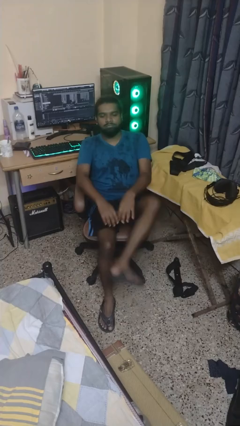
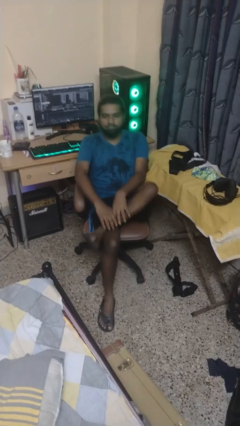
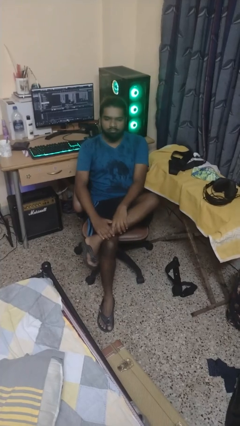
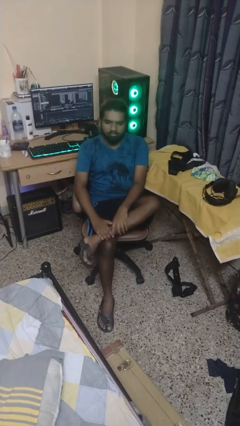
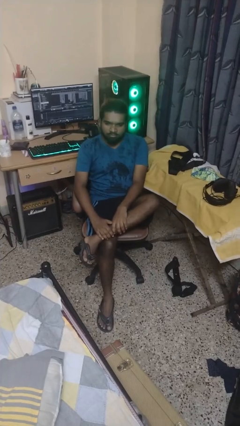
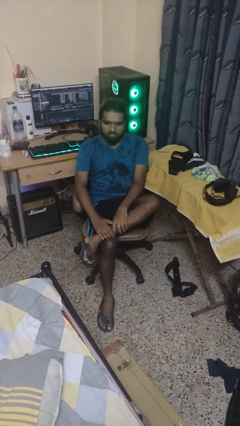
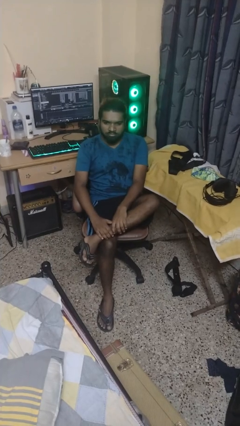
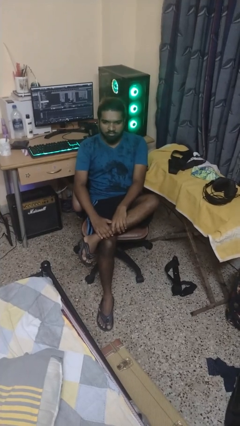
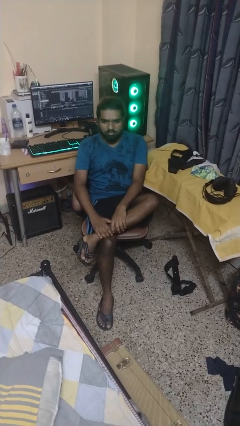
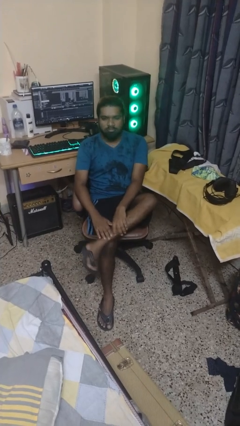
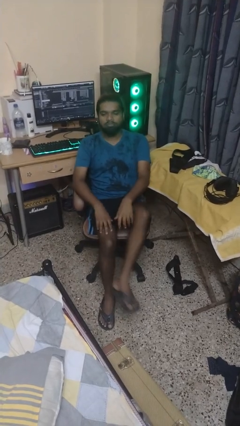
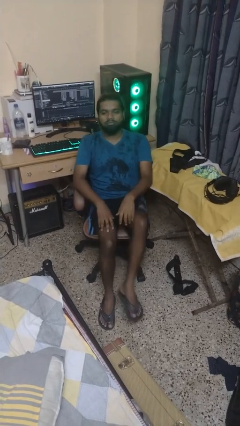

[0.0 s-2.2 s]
person crosses legs

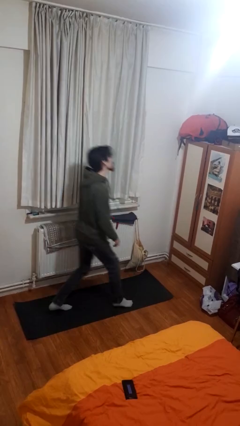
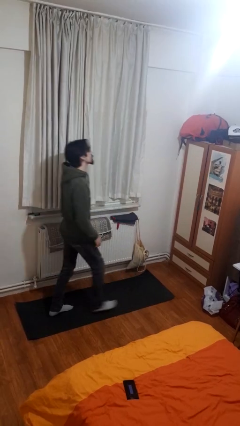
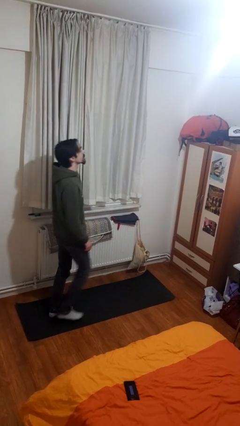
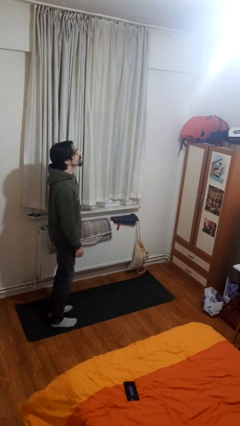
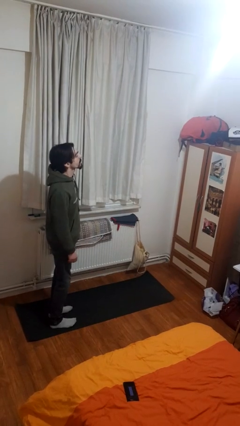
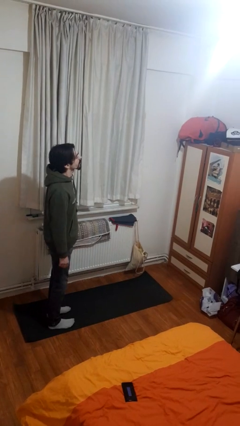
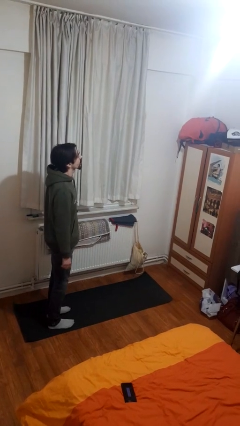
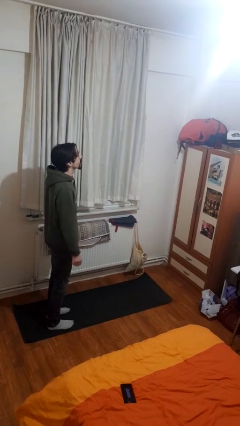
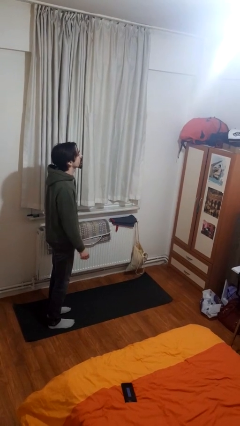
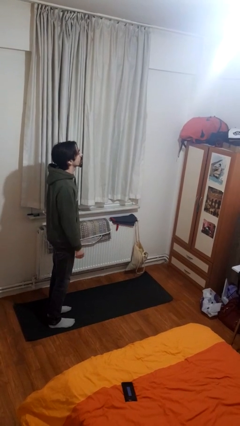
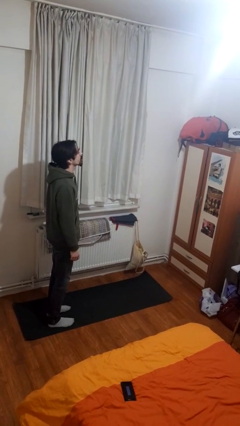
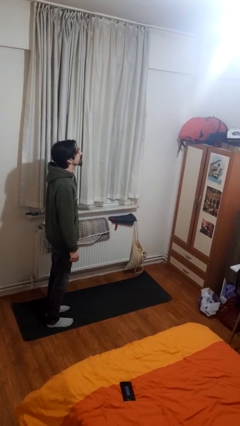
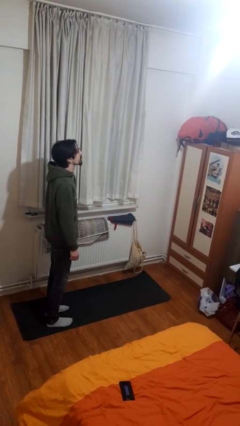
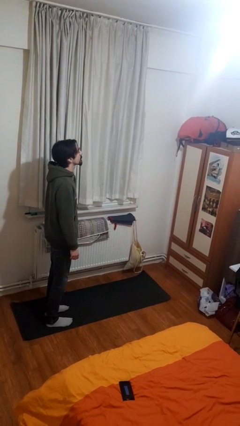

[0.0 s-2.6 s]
person stands up from floor

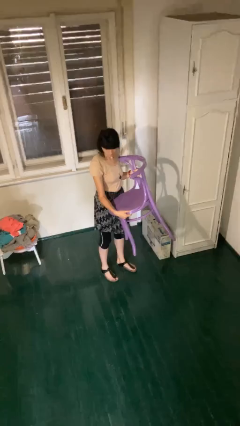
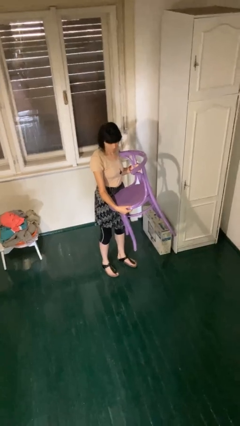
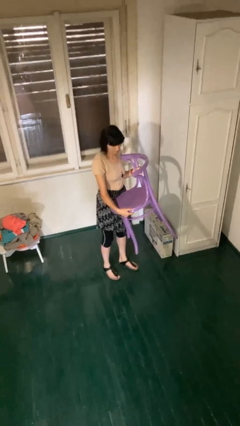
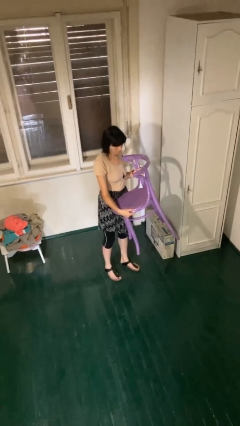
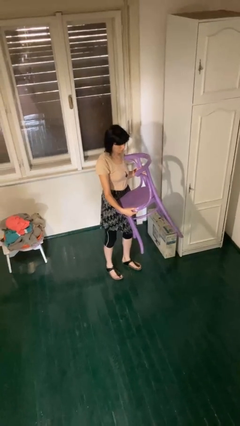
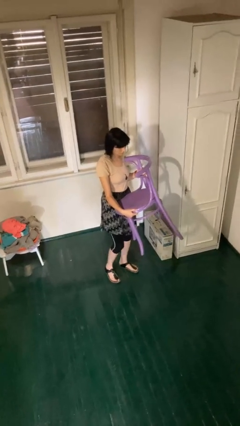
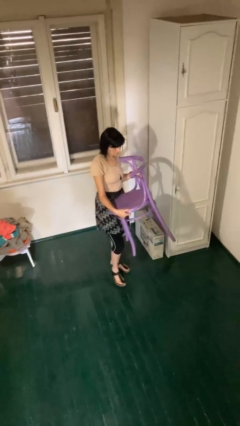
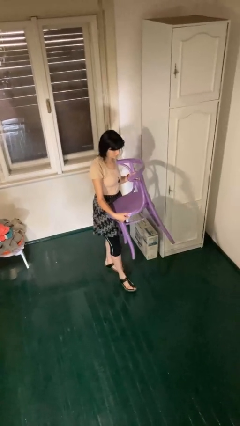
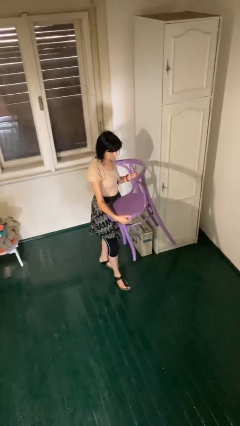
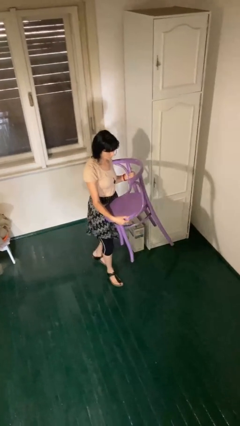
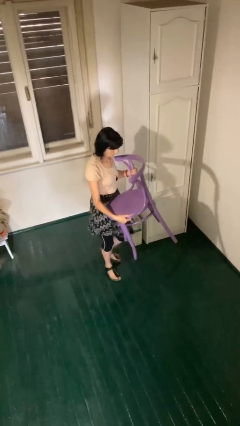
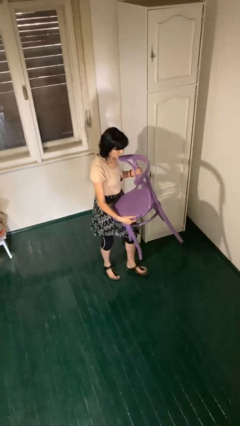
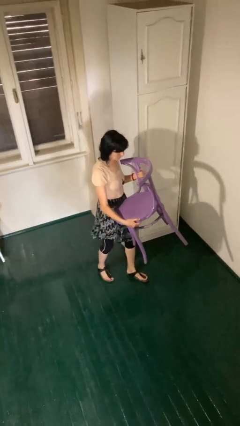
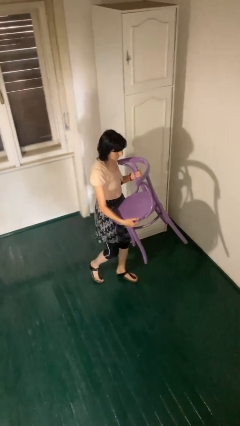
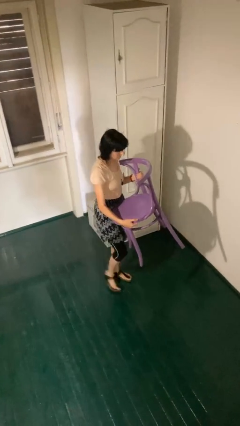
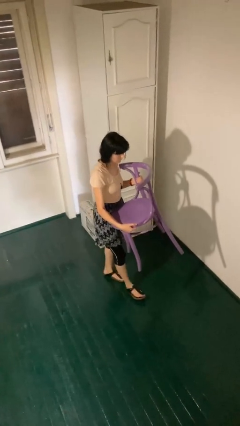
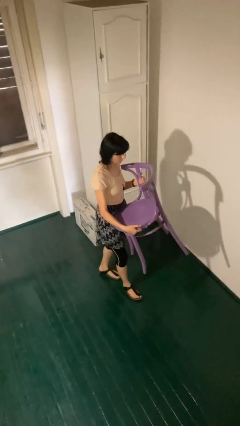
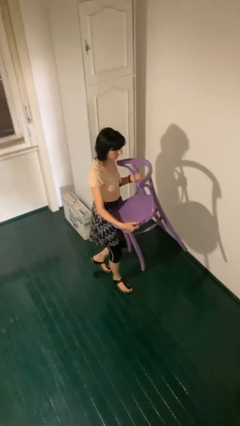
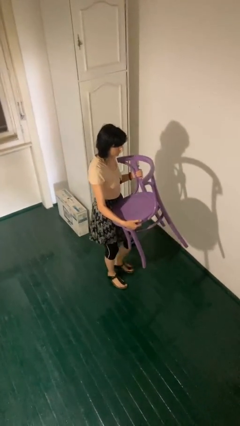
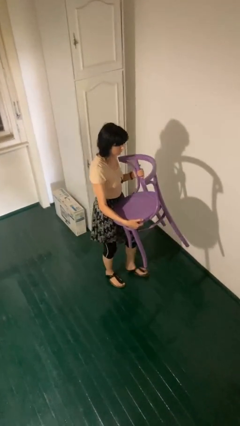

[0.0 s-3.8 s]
person carries furniture

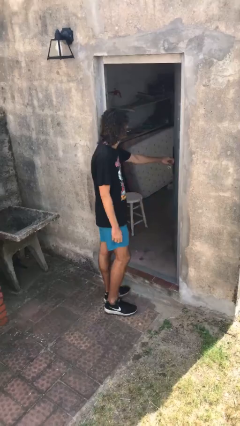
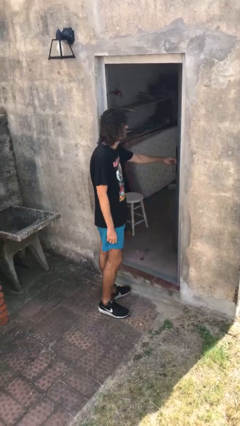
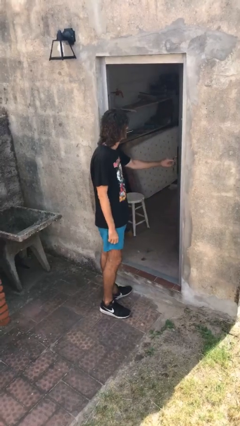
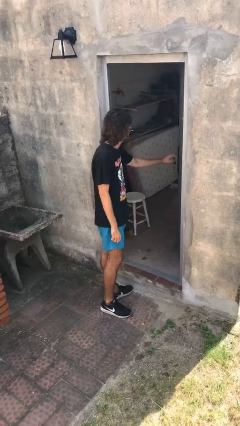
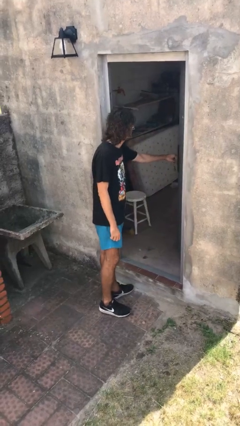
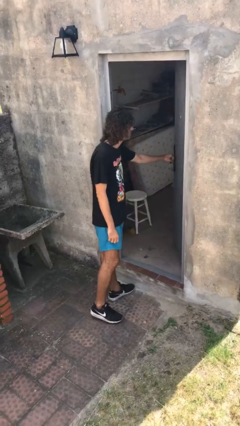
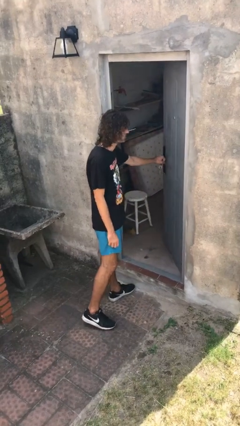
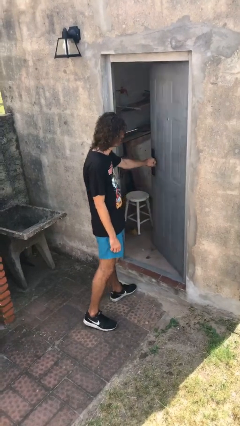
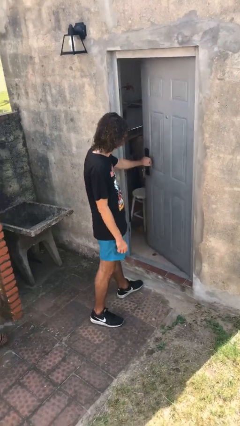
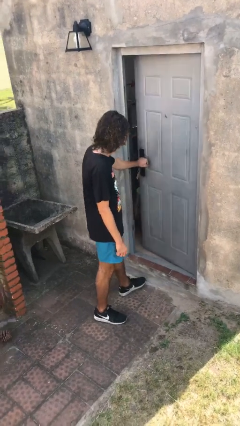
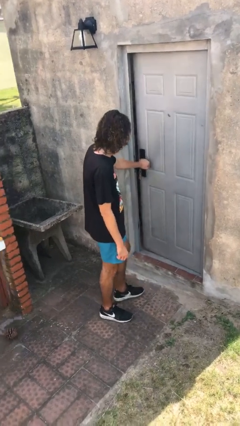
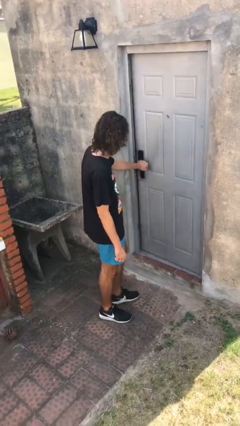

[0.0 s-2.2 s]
person closes facility door

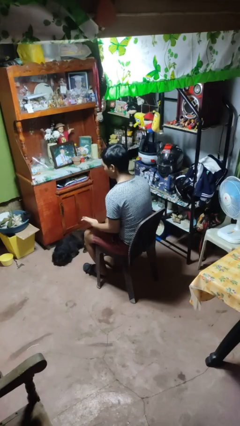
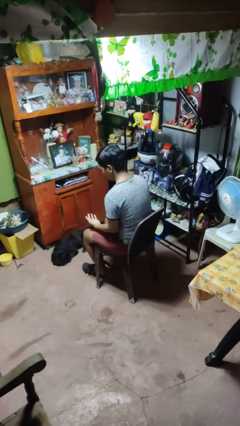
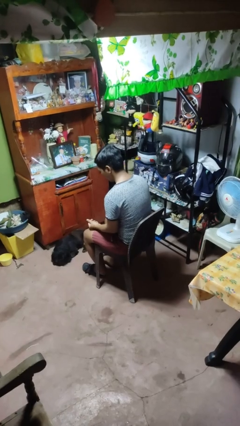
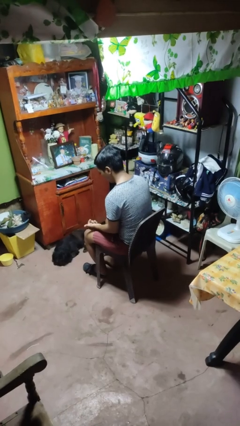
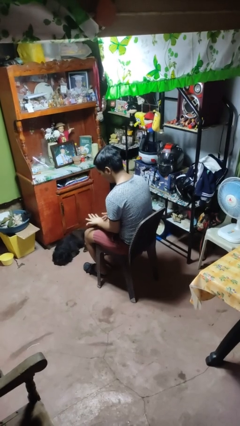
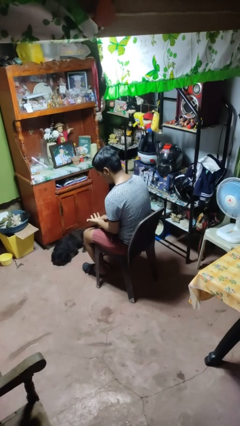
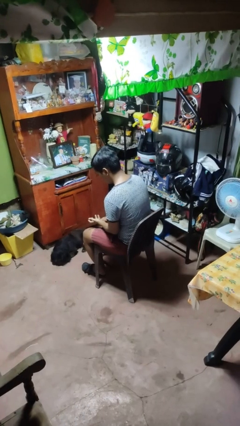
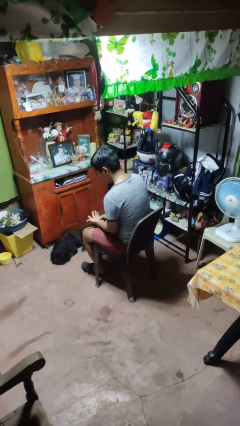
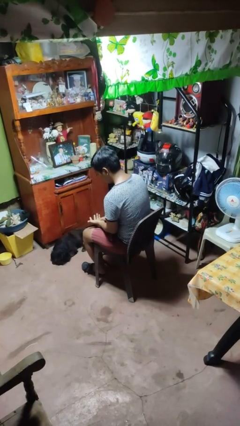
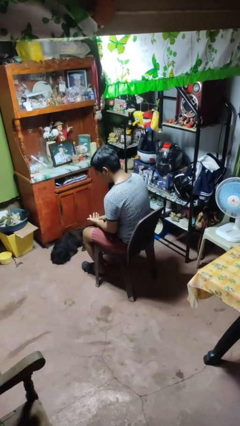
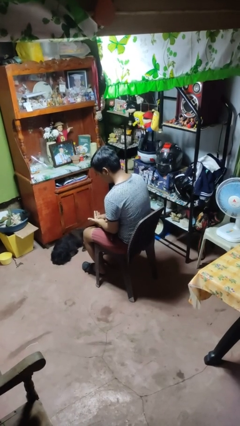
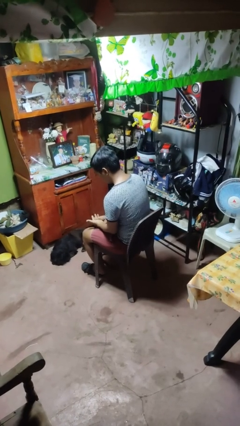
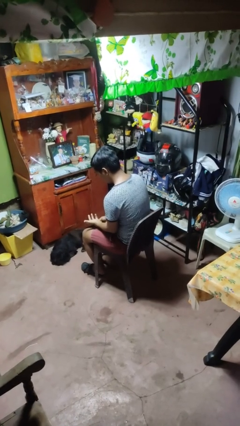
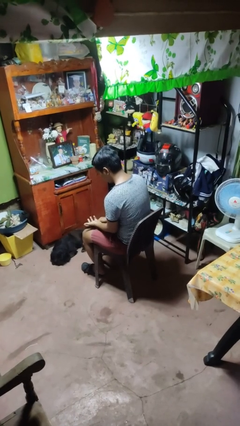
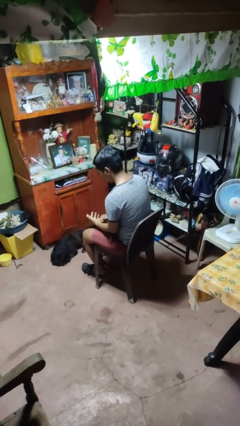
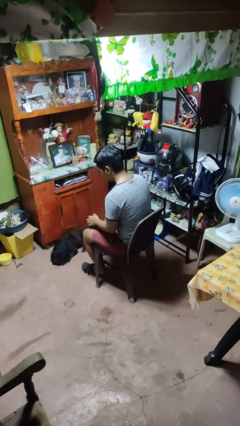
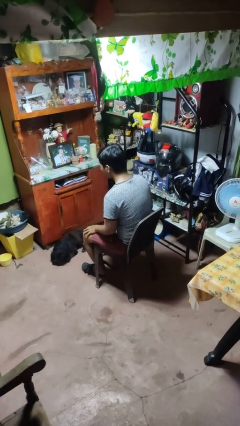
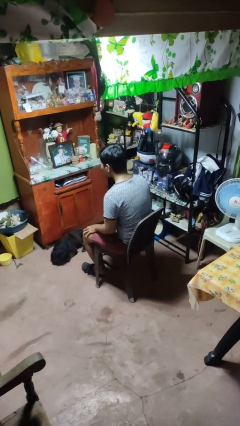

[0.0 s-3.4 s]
person looks at hands in lap

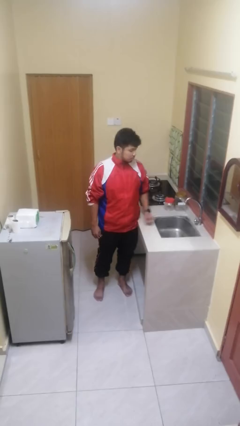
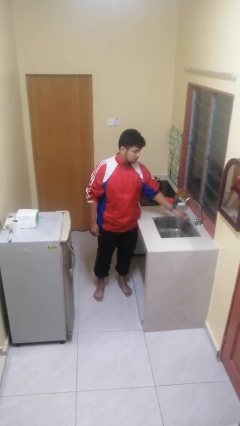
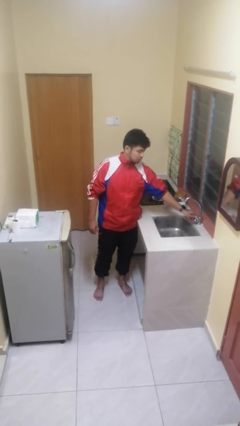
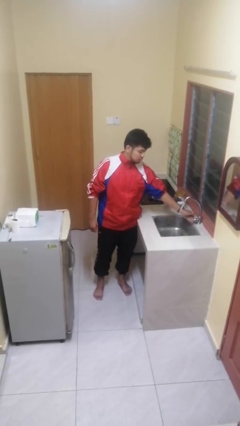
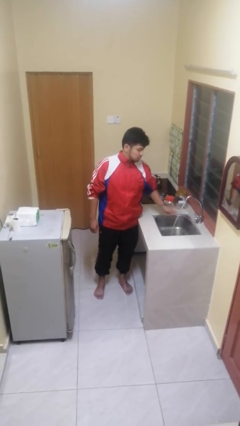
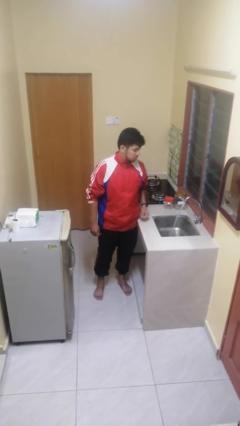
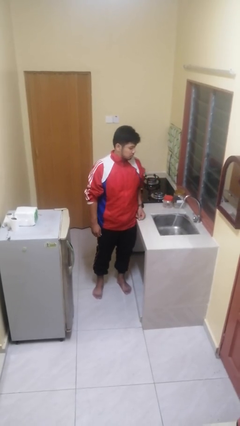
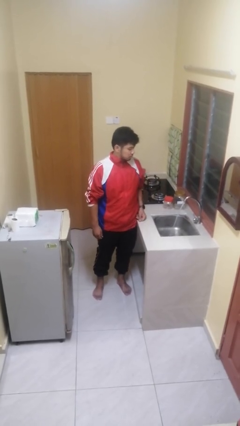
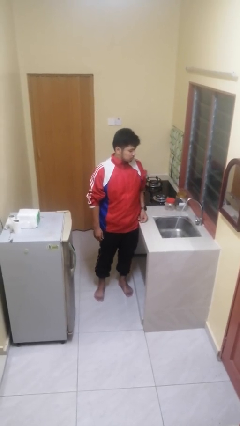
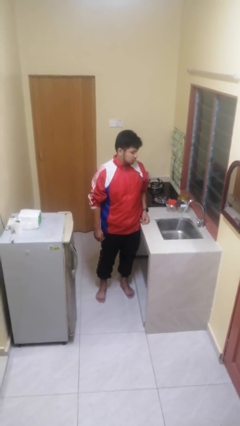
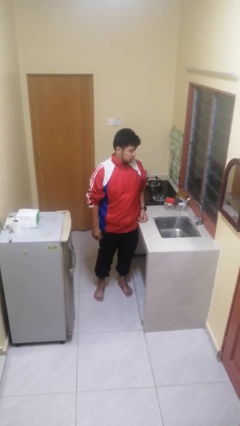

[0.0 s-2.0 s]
person turns on faucet

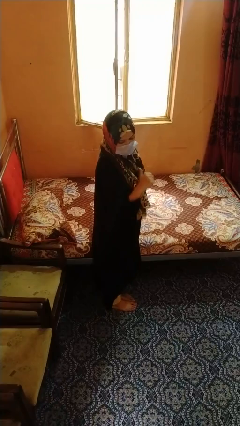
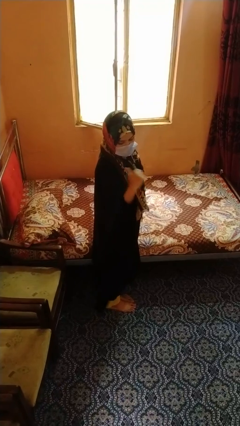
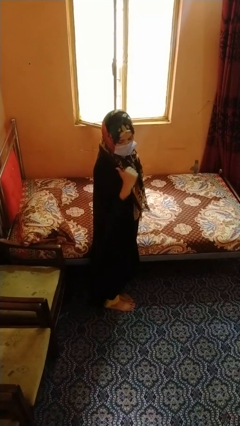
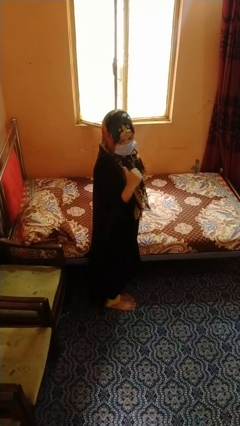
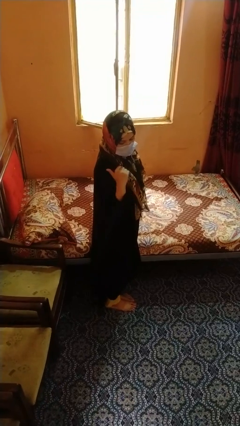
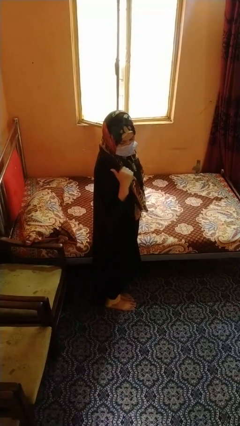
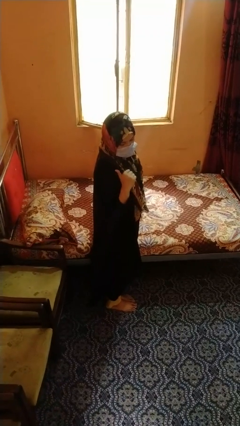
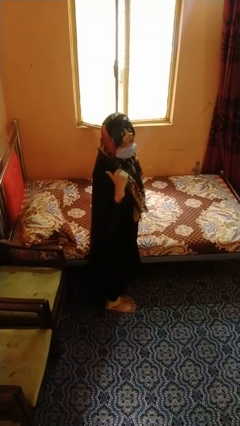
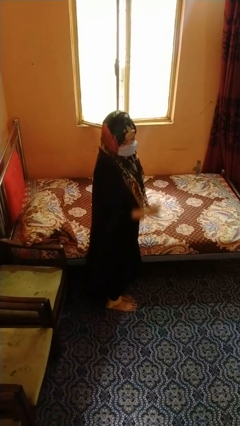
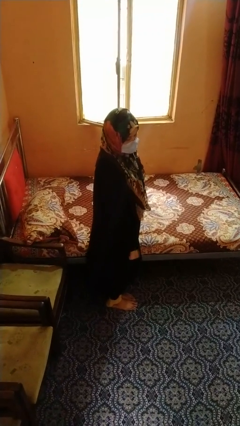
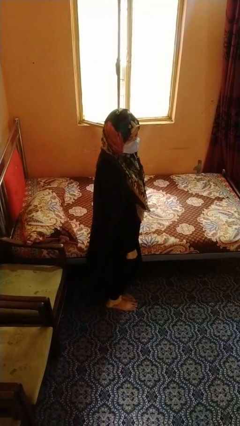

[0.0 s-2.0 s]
person gestures behind me
